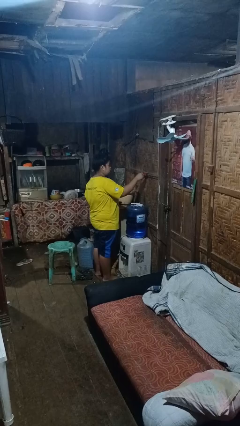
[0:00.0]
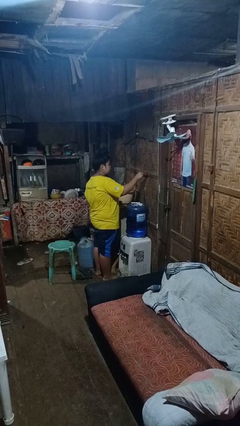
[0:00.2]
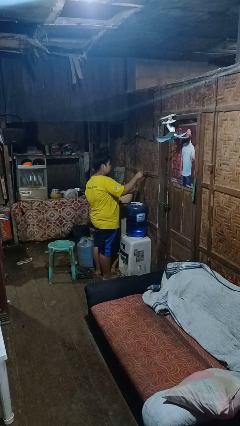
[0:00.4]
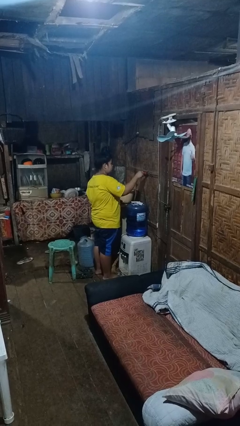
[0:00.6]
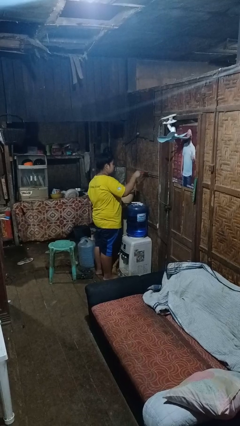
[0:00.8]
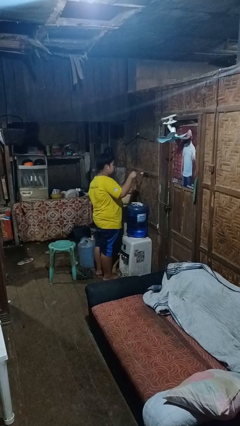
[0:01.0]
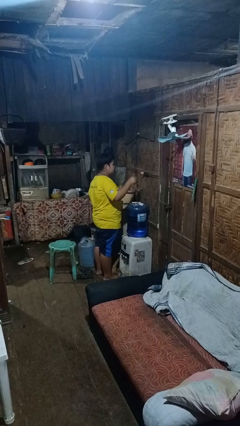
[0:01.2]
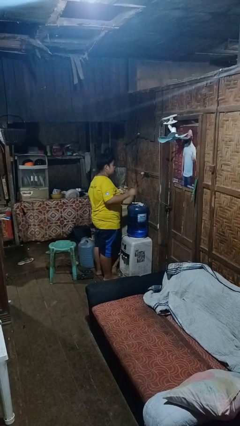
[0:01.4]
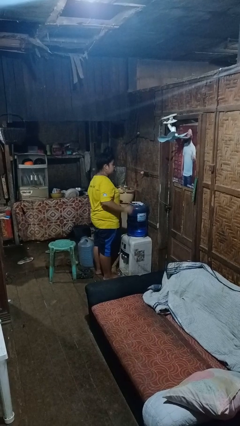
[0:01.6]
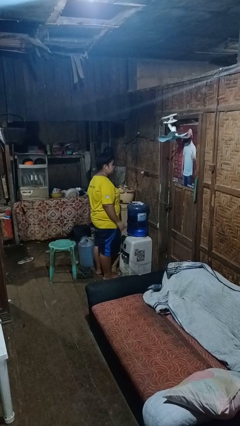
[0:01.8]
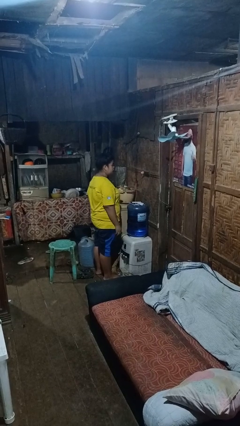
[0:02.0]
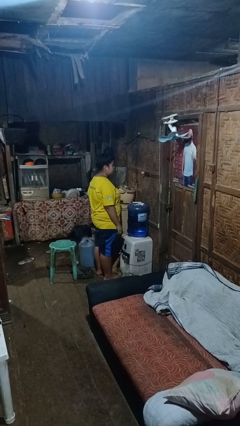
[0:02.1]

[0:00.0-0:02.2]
person unplugs from electrical socket

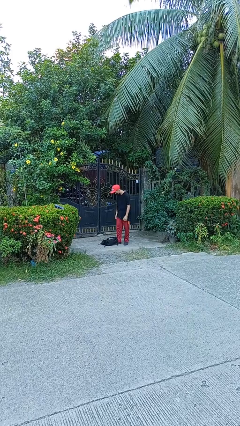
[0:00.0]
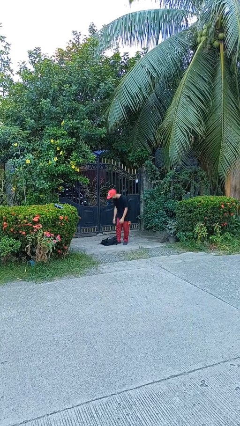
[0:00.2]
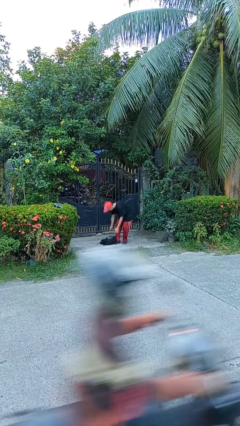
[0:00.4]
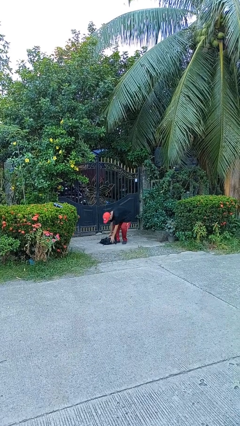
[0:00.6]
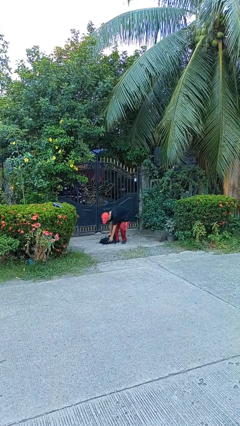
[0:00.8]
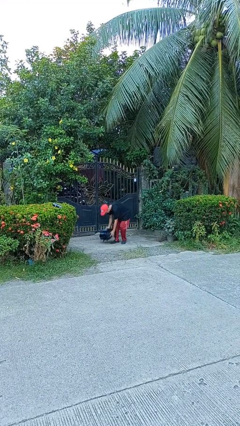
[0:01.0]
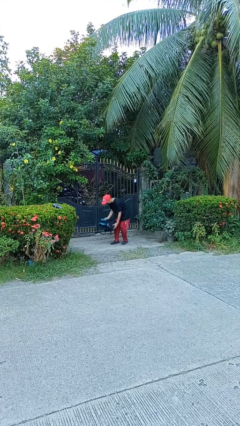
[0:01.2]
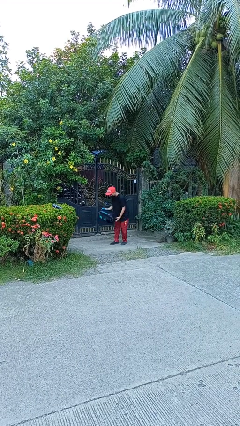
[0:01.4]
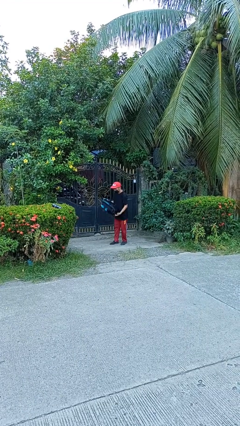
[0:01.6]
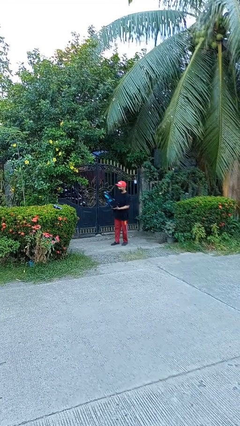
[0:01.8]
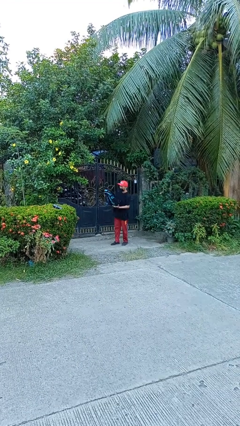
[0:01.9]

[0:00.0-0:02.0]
person picks up object from floor

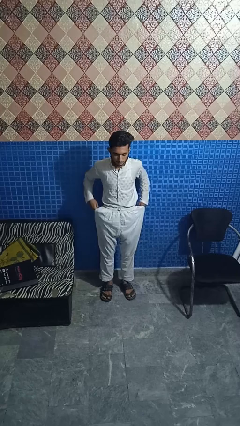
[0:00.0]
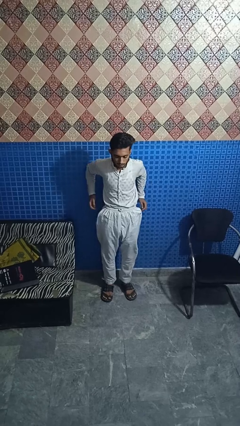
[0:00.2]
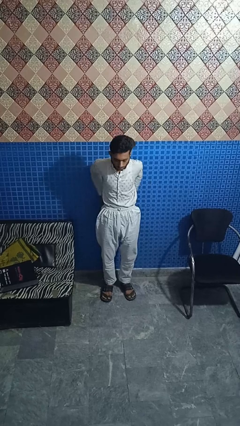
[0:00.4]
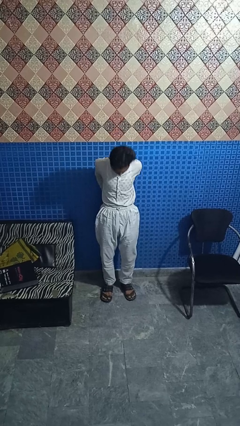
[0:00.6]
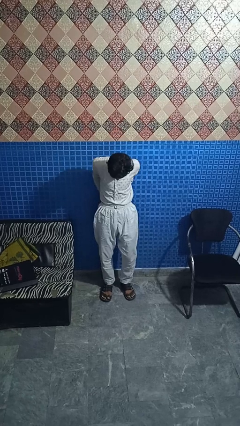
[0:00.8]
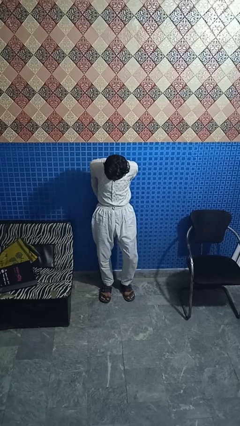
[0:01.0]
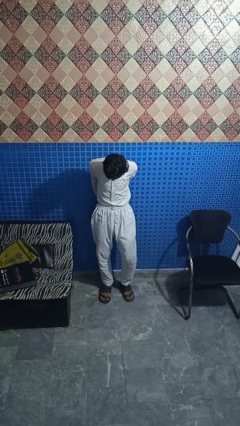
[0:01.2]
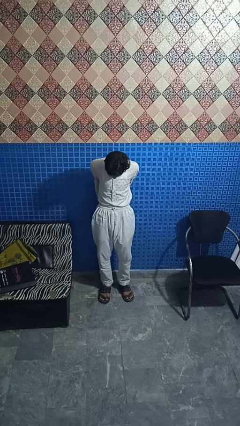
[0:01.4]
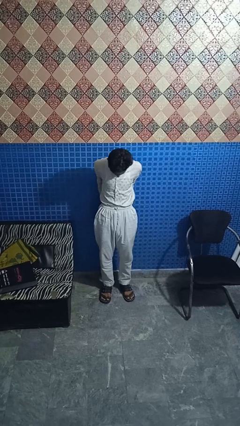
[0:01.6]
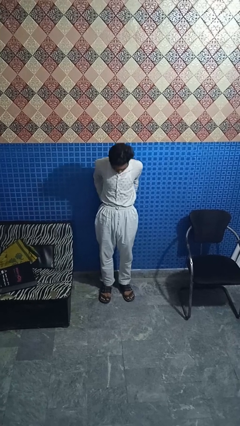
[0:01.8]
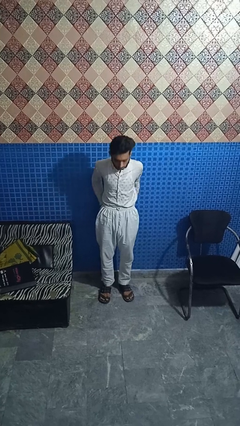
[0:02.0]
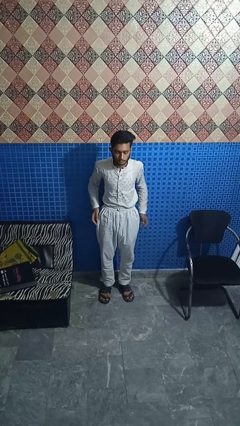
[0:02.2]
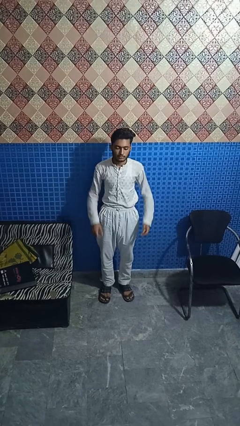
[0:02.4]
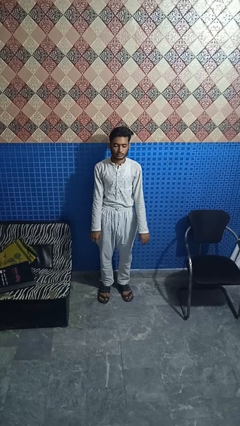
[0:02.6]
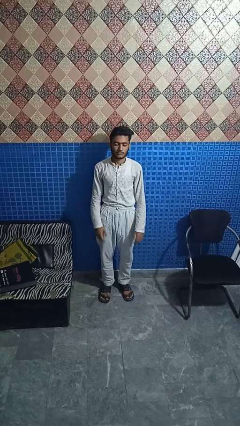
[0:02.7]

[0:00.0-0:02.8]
person puts hands in back pockets

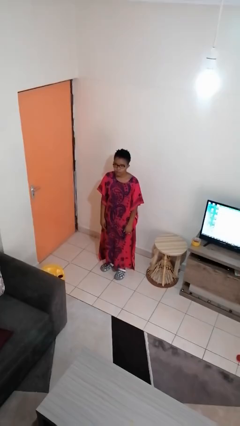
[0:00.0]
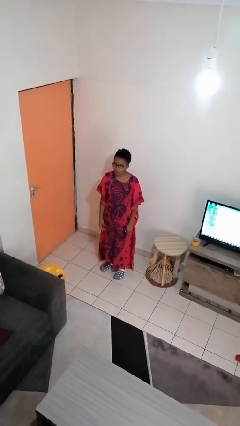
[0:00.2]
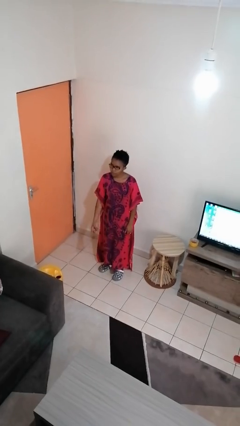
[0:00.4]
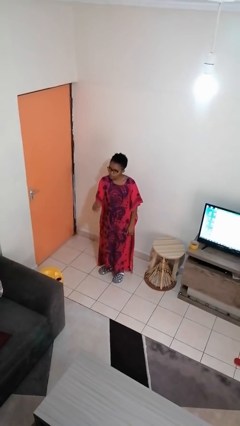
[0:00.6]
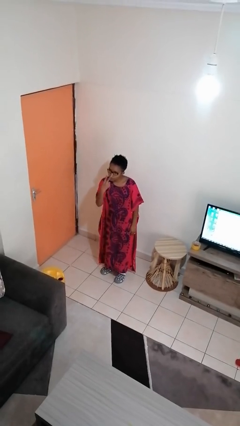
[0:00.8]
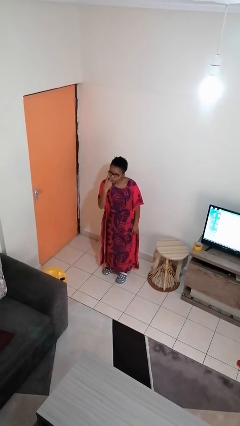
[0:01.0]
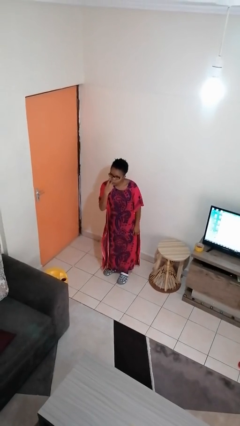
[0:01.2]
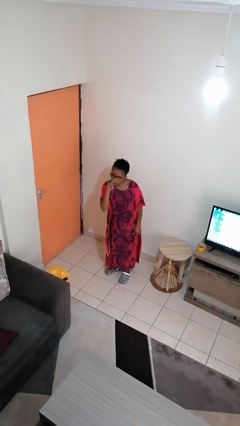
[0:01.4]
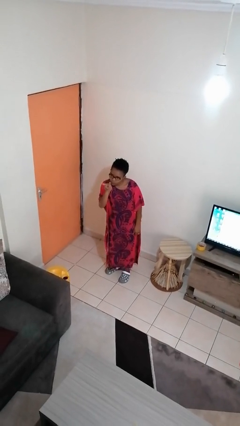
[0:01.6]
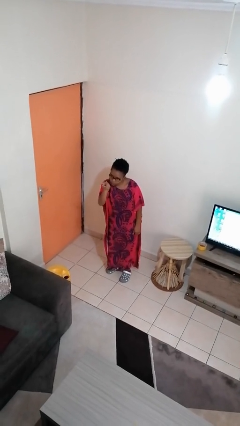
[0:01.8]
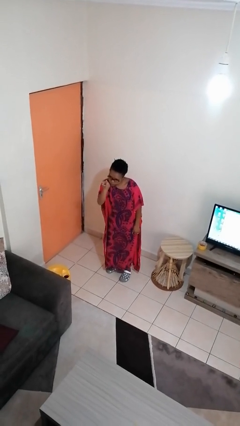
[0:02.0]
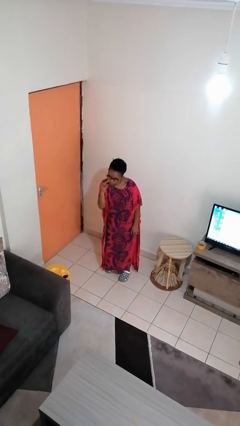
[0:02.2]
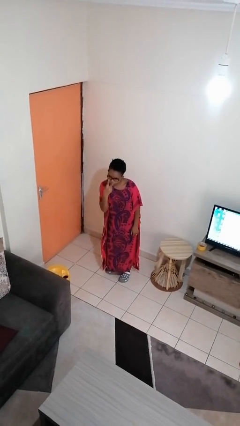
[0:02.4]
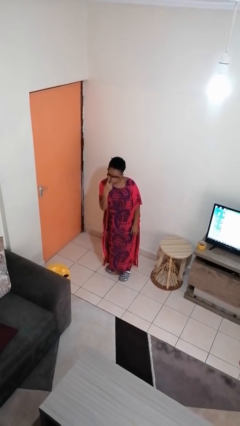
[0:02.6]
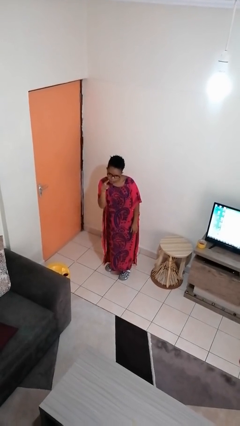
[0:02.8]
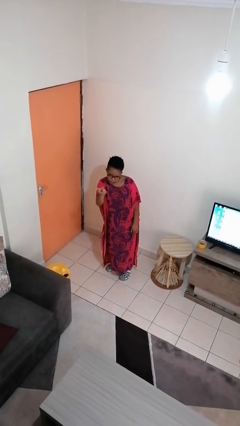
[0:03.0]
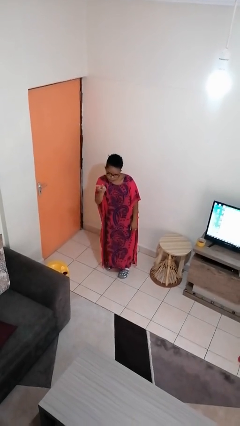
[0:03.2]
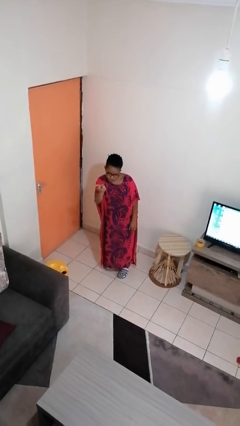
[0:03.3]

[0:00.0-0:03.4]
person gestures watch closely

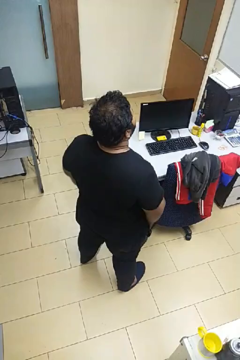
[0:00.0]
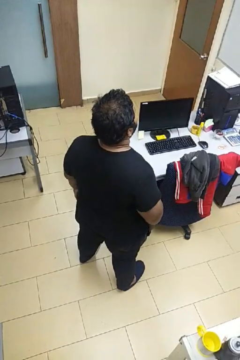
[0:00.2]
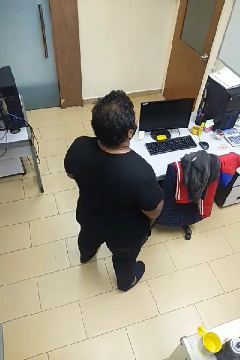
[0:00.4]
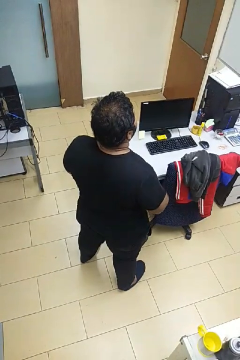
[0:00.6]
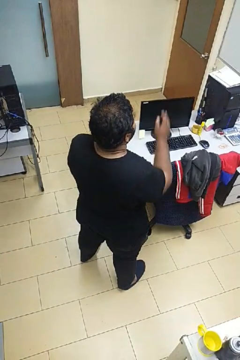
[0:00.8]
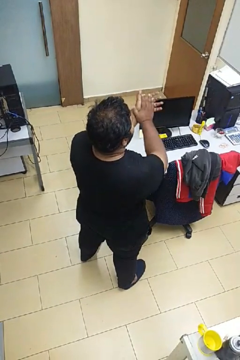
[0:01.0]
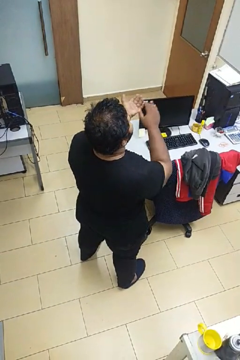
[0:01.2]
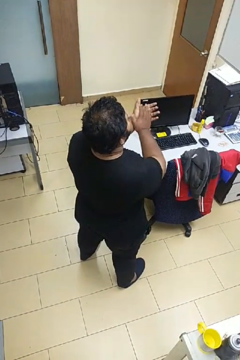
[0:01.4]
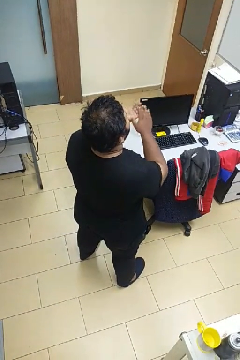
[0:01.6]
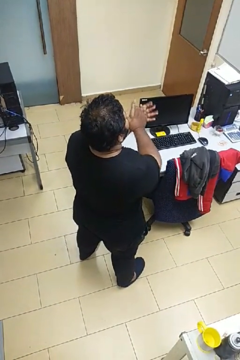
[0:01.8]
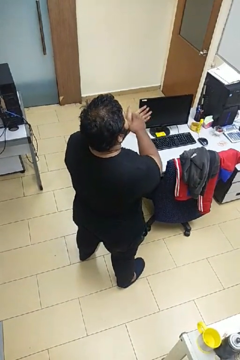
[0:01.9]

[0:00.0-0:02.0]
person claps hands

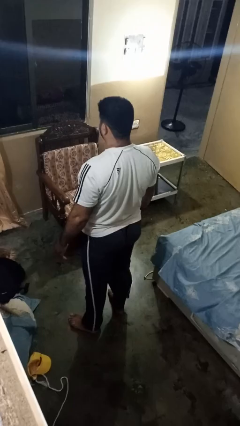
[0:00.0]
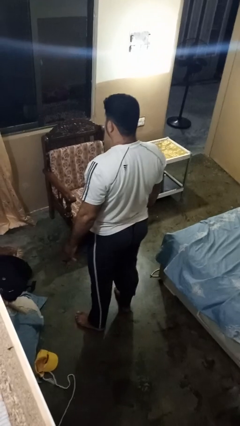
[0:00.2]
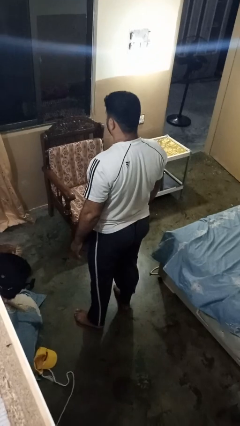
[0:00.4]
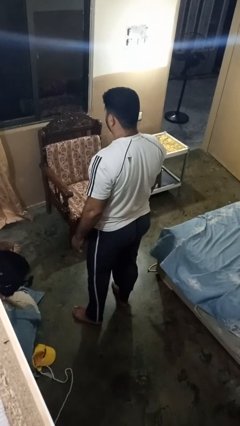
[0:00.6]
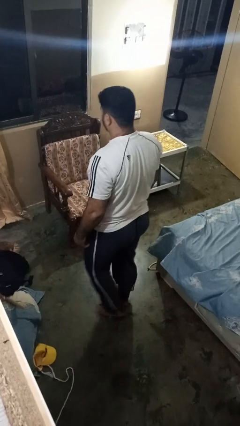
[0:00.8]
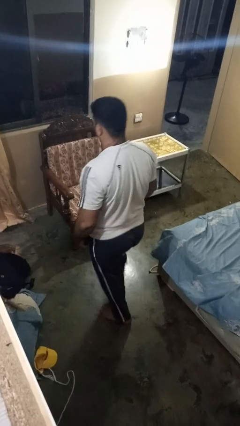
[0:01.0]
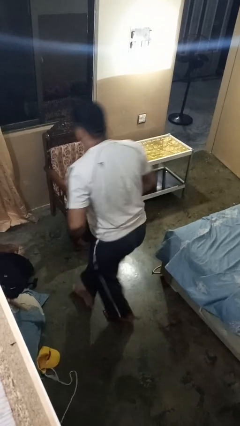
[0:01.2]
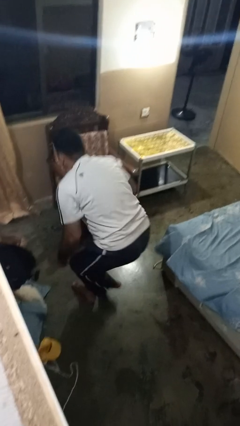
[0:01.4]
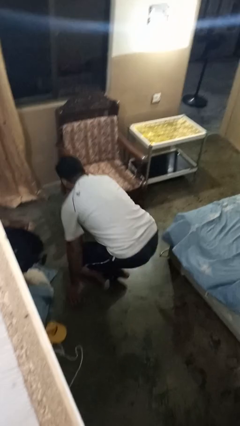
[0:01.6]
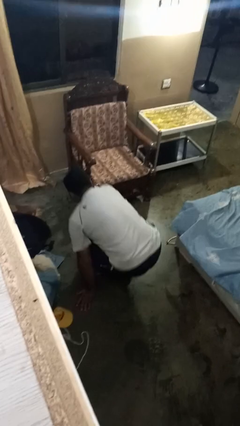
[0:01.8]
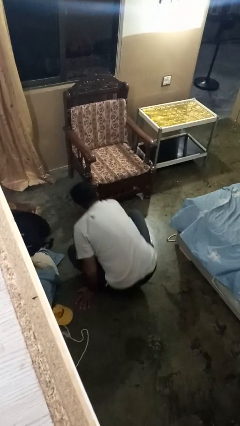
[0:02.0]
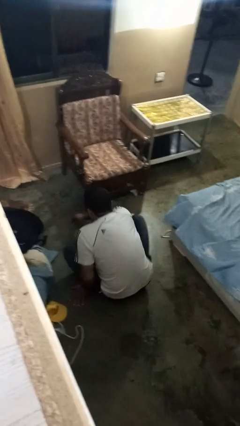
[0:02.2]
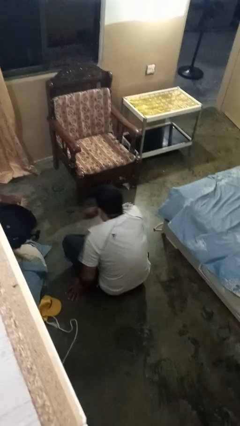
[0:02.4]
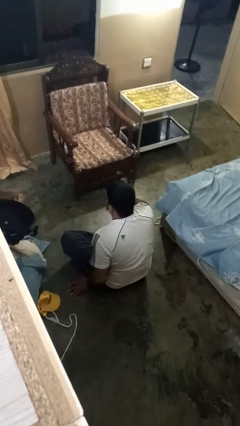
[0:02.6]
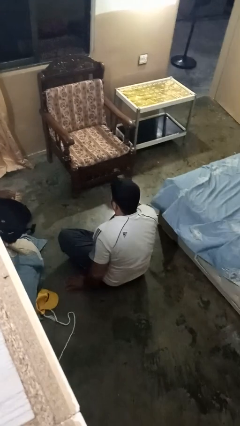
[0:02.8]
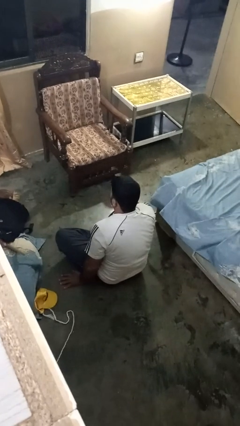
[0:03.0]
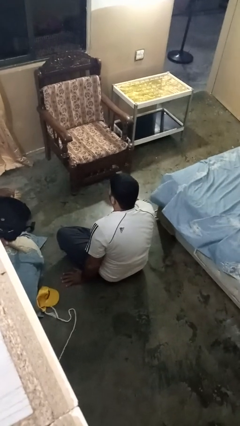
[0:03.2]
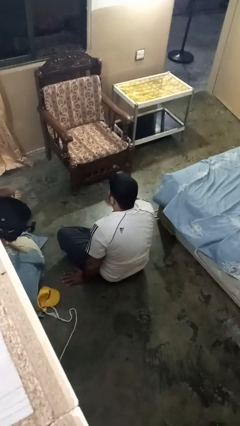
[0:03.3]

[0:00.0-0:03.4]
person crosses legs

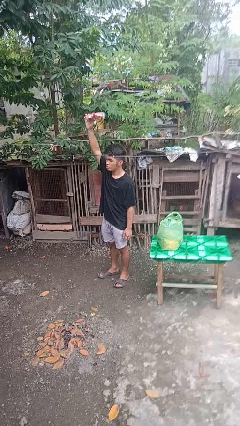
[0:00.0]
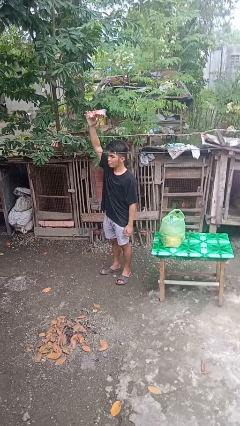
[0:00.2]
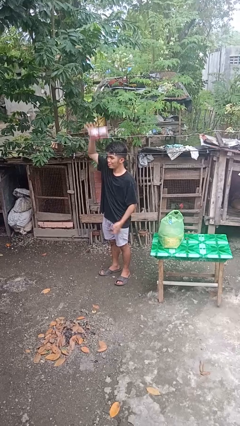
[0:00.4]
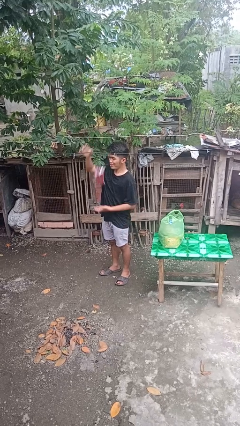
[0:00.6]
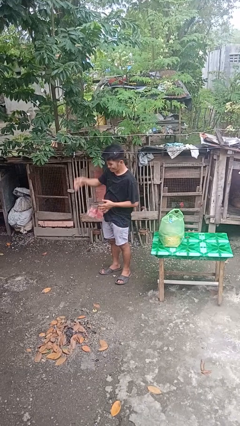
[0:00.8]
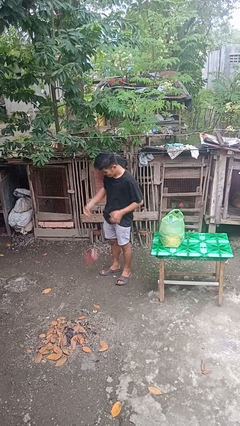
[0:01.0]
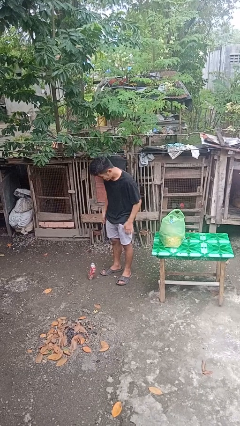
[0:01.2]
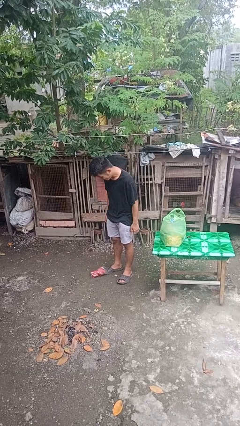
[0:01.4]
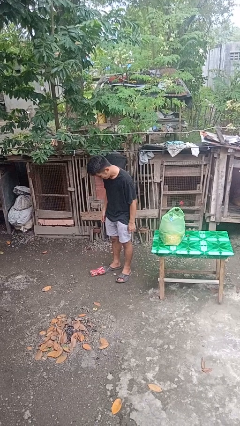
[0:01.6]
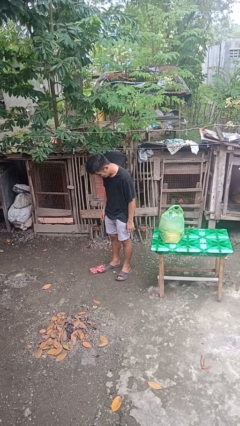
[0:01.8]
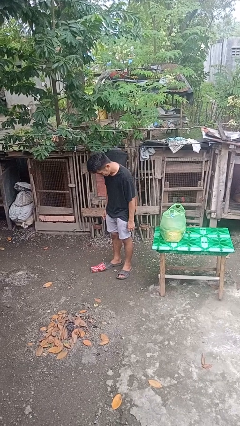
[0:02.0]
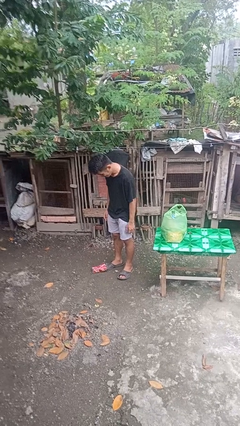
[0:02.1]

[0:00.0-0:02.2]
person drops object
